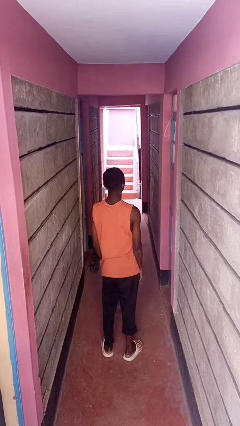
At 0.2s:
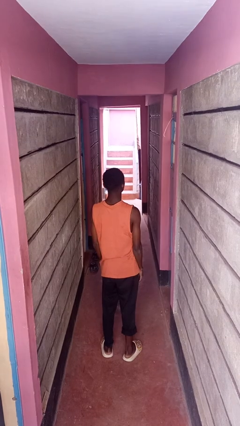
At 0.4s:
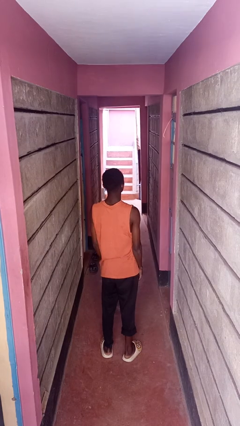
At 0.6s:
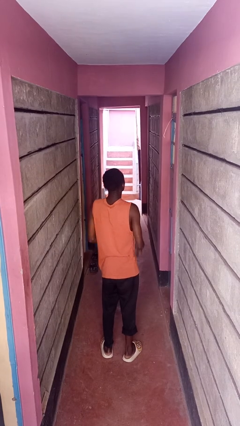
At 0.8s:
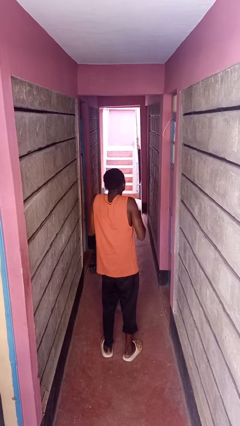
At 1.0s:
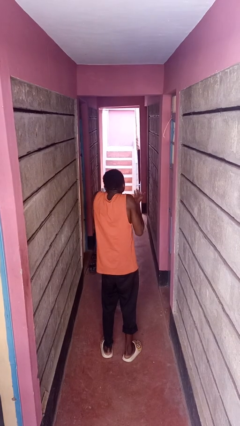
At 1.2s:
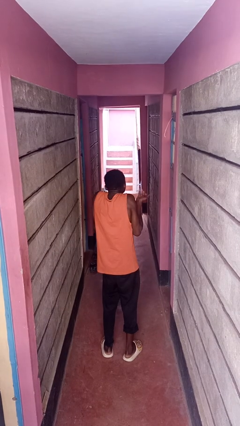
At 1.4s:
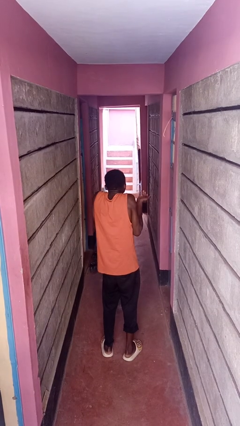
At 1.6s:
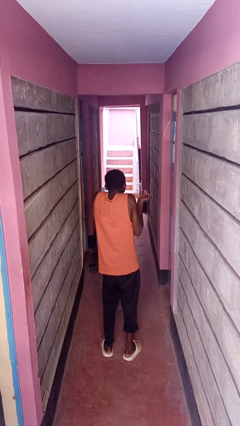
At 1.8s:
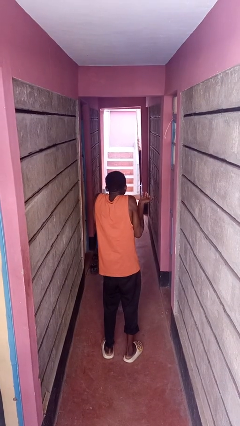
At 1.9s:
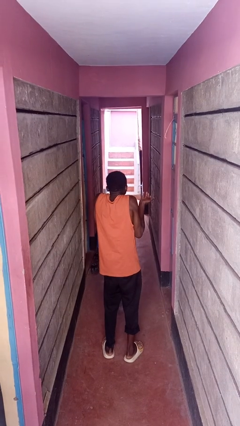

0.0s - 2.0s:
person shrugs

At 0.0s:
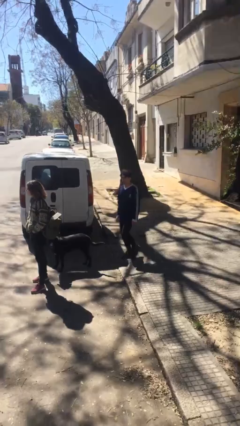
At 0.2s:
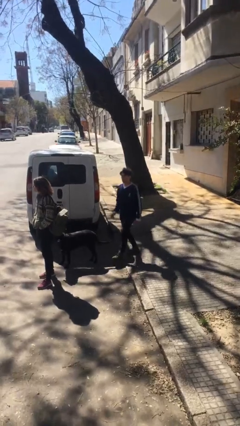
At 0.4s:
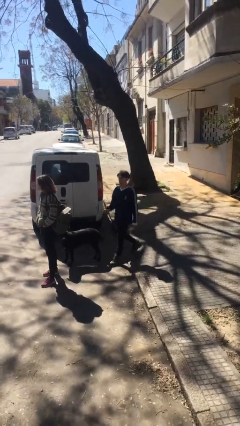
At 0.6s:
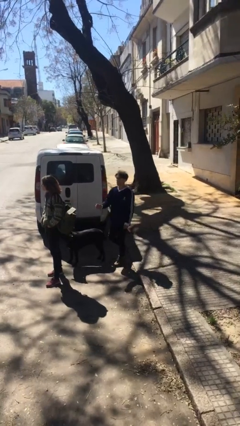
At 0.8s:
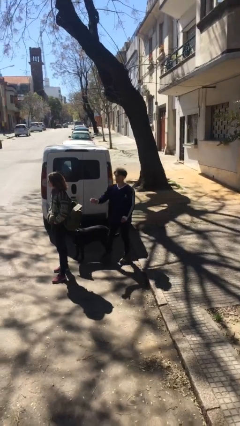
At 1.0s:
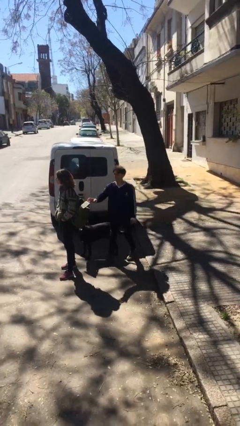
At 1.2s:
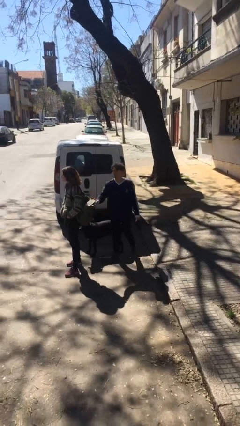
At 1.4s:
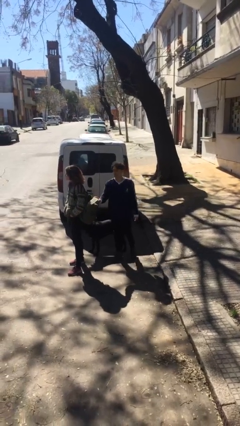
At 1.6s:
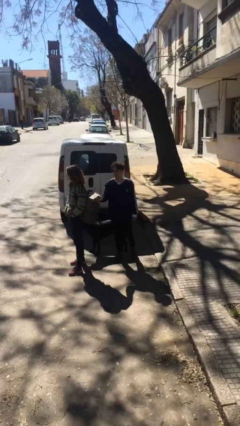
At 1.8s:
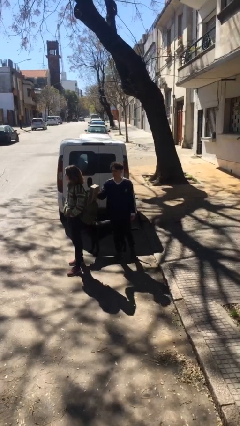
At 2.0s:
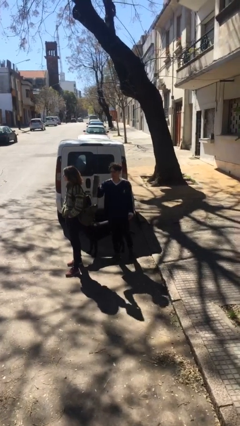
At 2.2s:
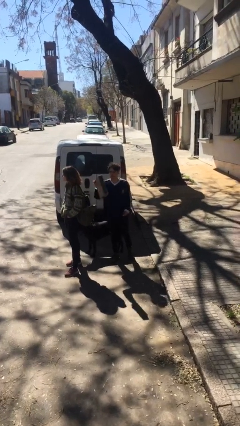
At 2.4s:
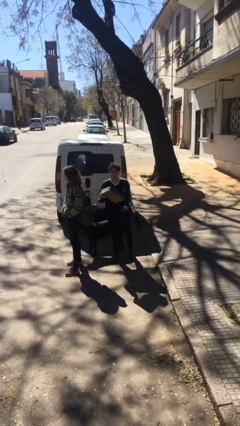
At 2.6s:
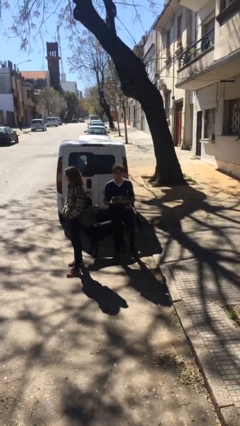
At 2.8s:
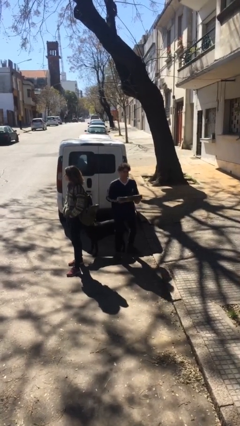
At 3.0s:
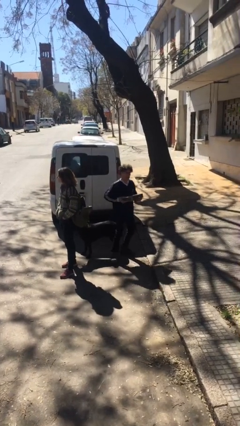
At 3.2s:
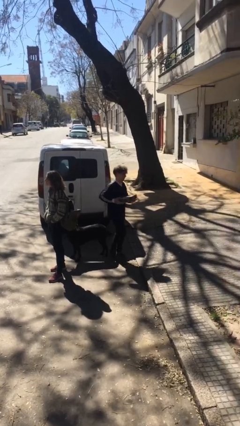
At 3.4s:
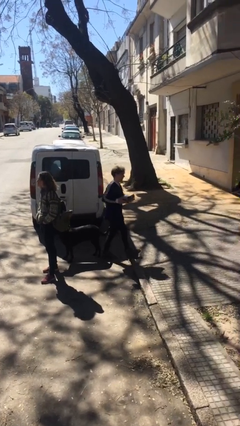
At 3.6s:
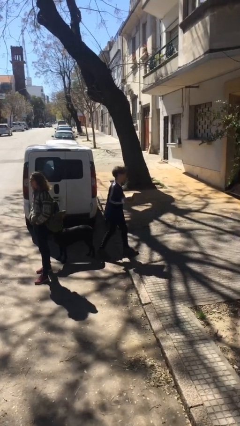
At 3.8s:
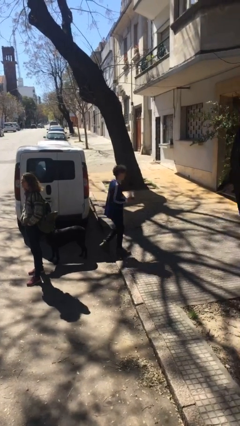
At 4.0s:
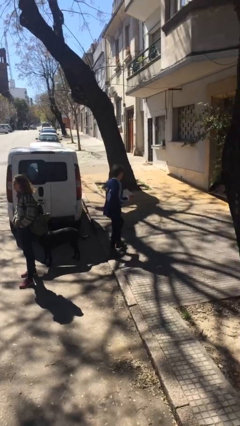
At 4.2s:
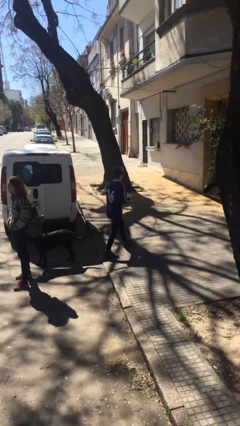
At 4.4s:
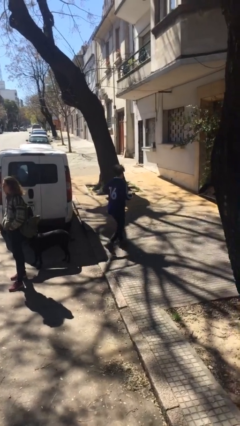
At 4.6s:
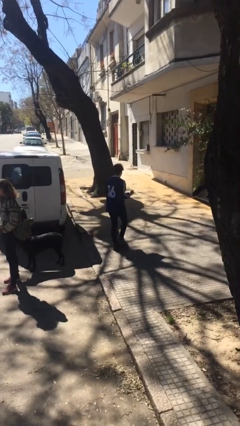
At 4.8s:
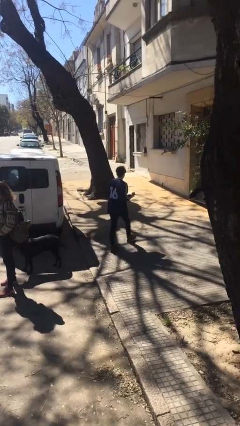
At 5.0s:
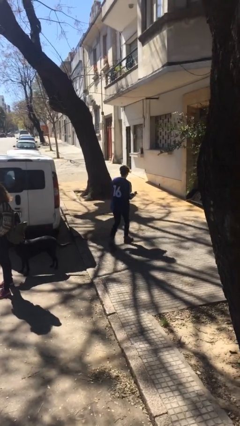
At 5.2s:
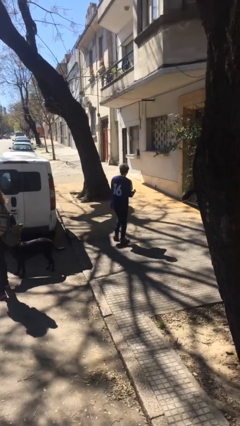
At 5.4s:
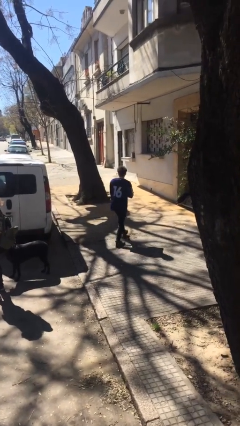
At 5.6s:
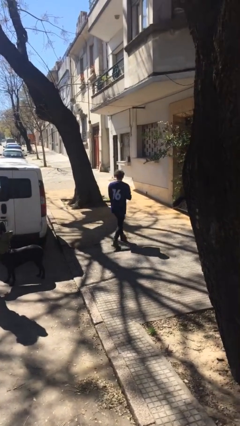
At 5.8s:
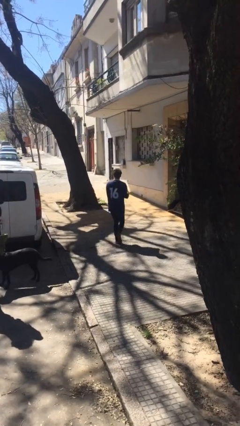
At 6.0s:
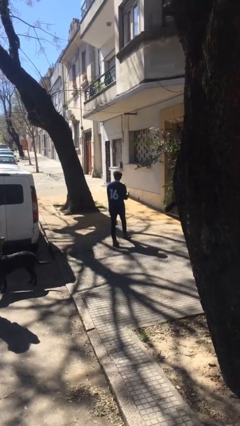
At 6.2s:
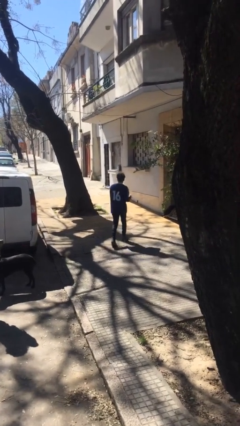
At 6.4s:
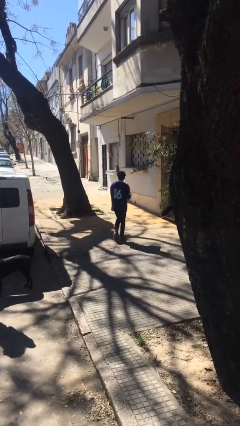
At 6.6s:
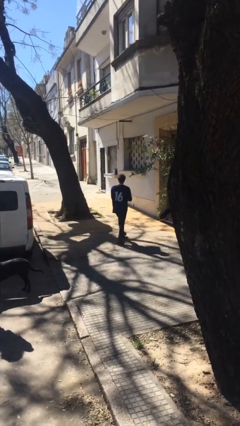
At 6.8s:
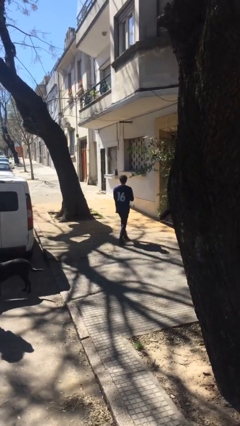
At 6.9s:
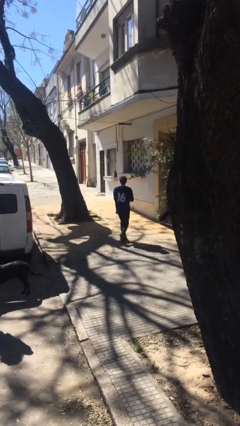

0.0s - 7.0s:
person steals object from person

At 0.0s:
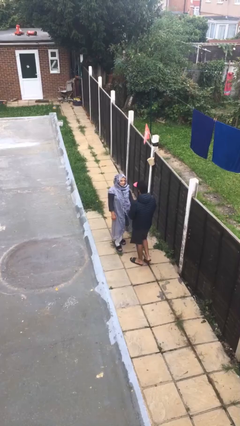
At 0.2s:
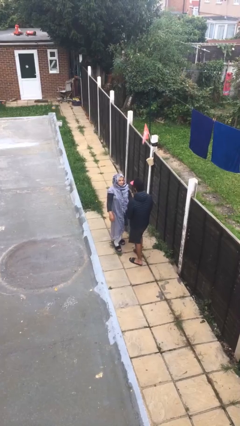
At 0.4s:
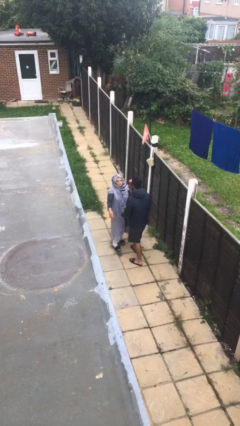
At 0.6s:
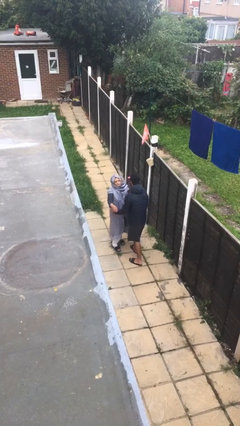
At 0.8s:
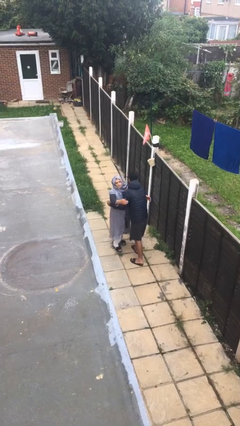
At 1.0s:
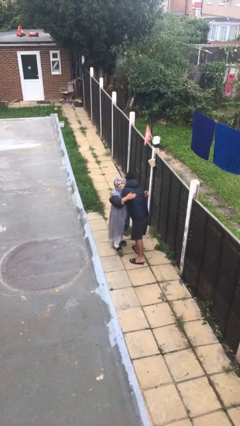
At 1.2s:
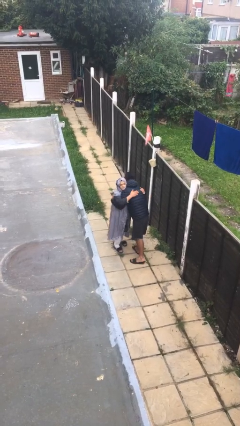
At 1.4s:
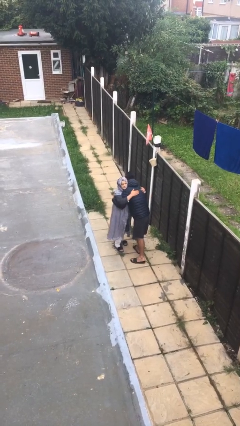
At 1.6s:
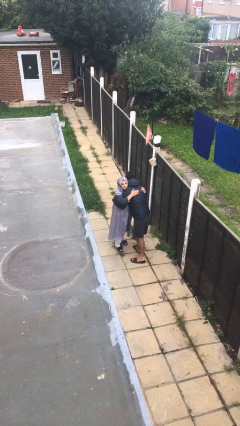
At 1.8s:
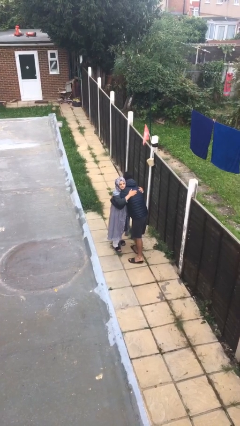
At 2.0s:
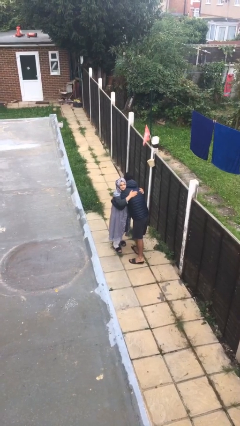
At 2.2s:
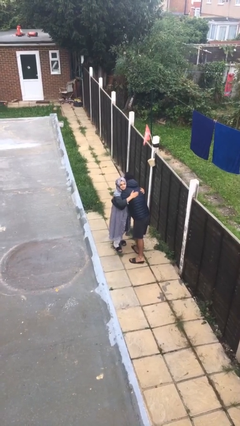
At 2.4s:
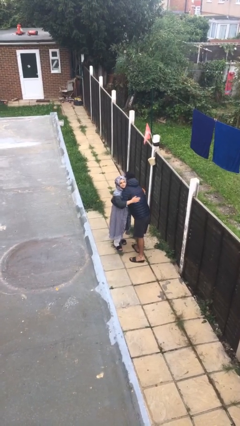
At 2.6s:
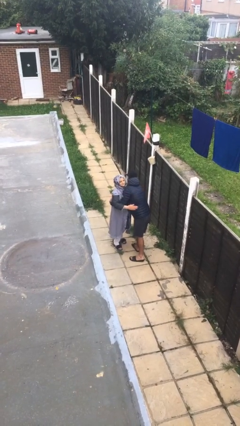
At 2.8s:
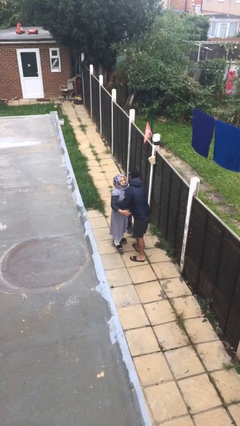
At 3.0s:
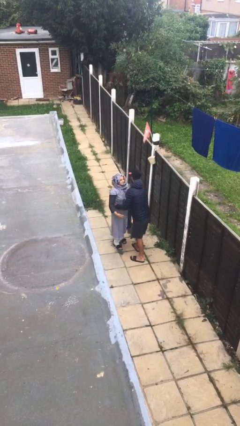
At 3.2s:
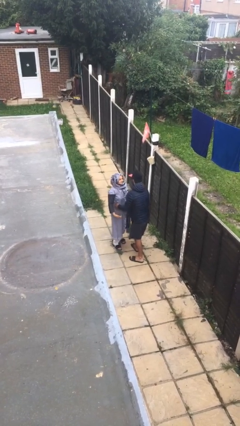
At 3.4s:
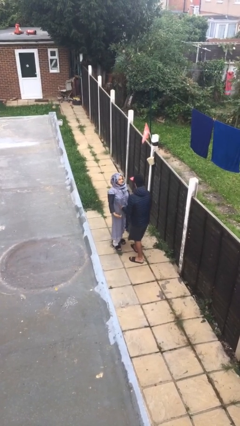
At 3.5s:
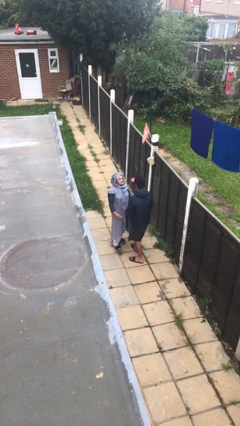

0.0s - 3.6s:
person embraces person

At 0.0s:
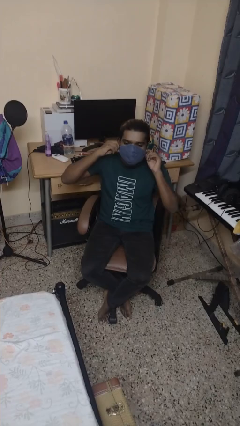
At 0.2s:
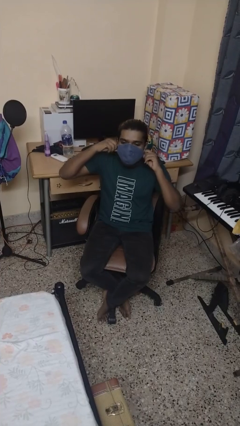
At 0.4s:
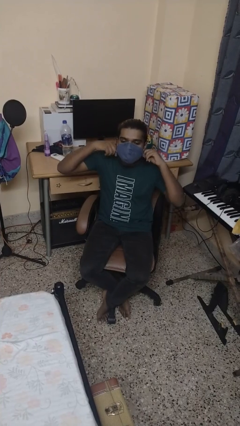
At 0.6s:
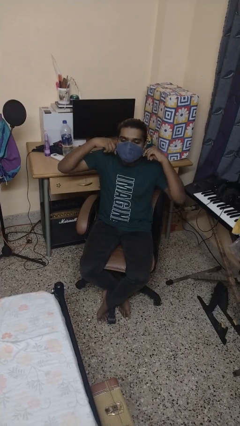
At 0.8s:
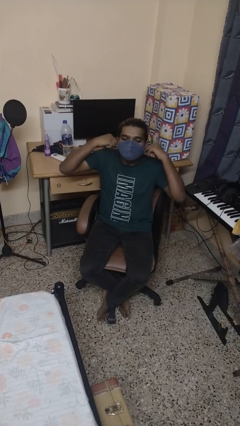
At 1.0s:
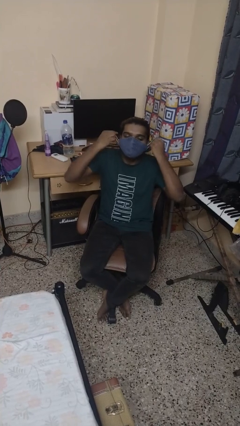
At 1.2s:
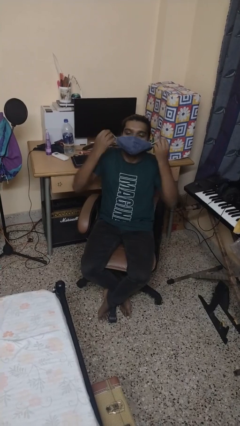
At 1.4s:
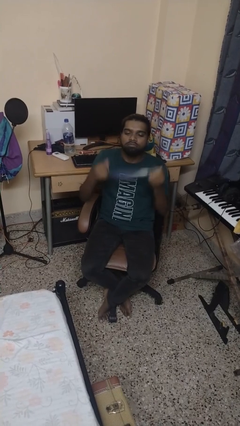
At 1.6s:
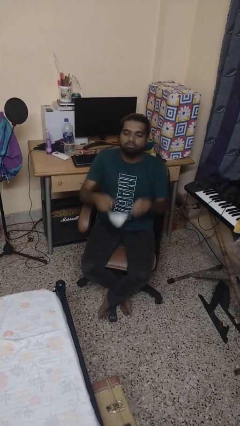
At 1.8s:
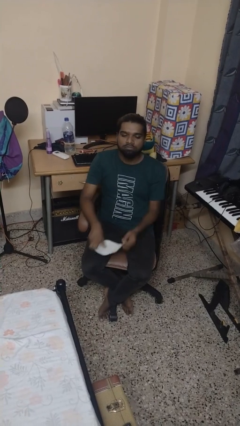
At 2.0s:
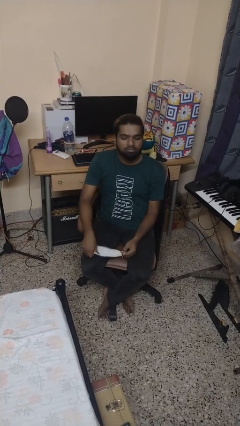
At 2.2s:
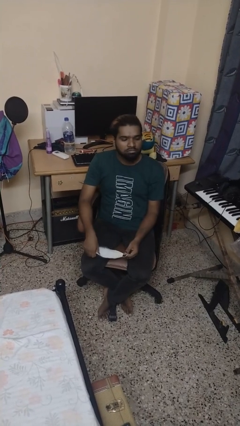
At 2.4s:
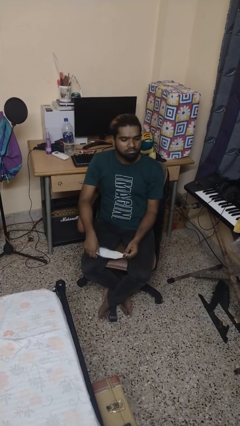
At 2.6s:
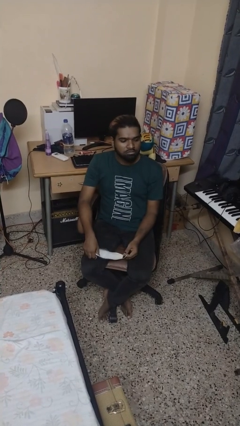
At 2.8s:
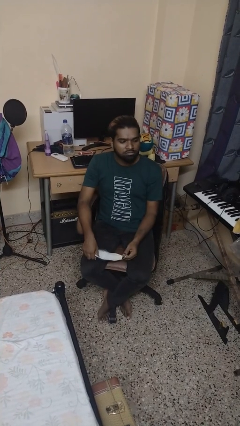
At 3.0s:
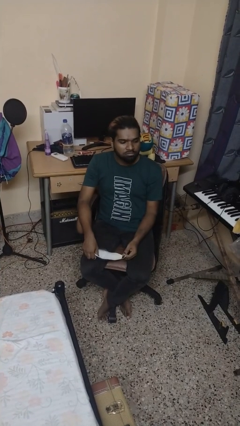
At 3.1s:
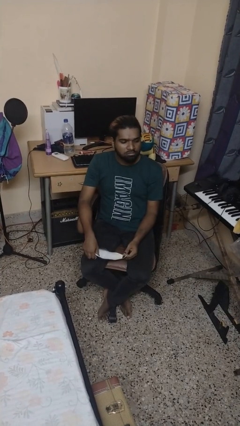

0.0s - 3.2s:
person takes off facemask

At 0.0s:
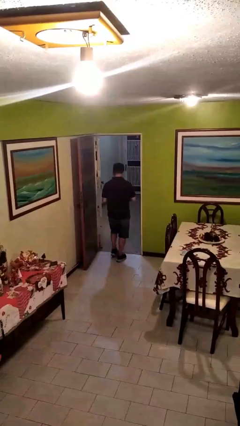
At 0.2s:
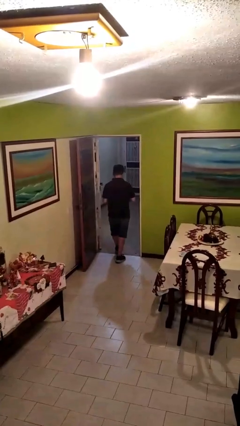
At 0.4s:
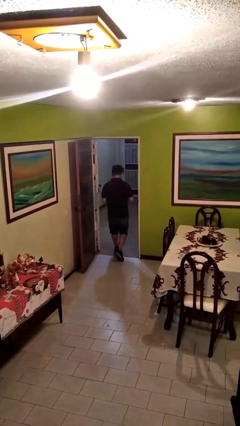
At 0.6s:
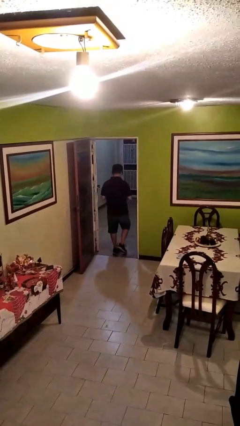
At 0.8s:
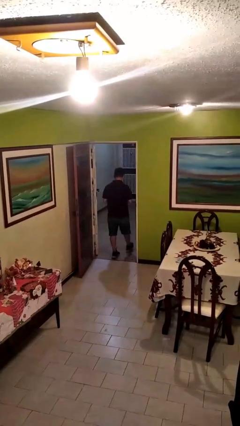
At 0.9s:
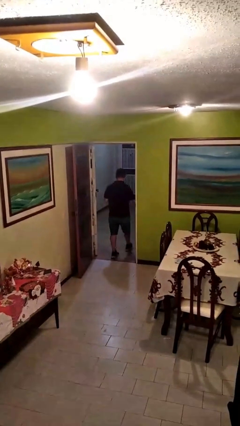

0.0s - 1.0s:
person exits scene through structure

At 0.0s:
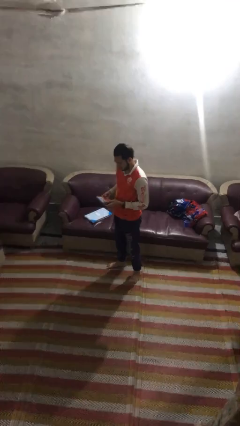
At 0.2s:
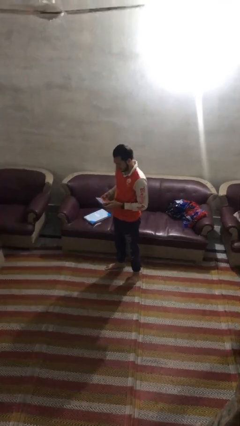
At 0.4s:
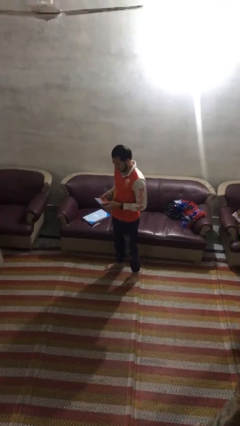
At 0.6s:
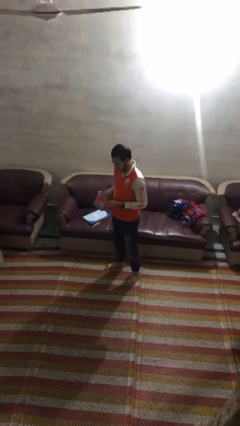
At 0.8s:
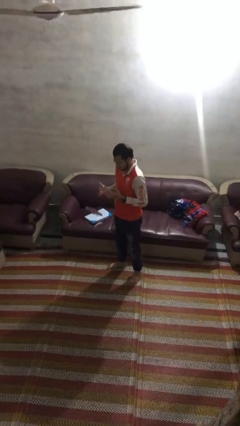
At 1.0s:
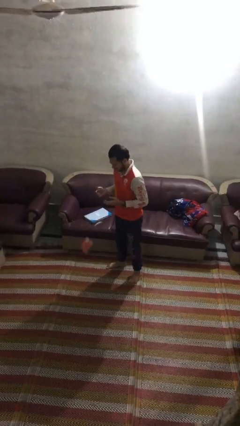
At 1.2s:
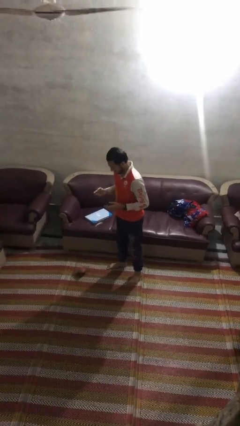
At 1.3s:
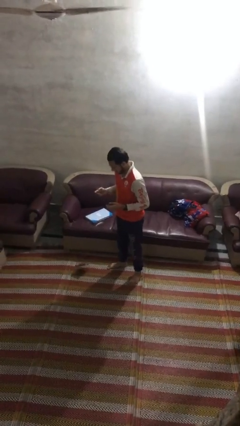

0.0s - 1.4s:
person drops object
